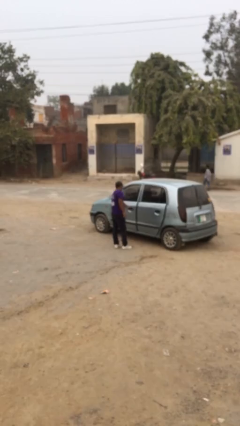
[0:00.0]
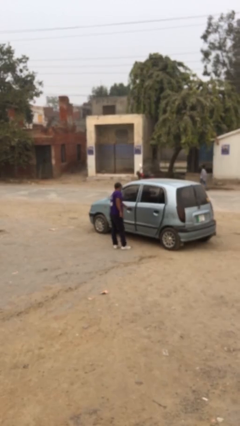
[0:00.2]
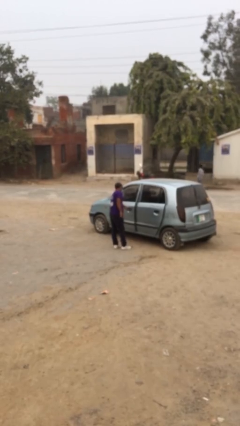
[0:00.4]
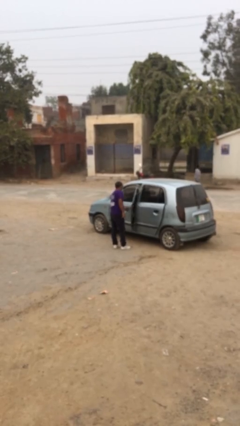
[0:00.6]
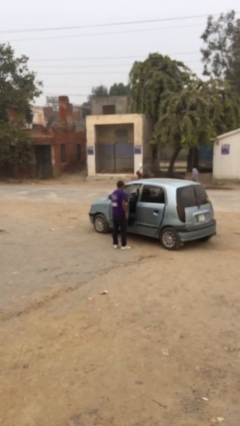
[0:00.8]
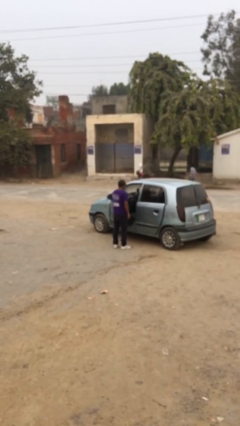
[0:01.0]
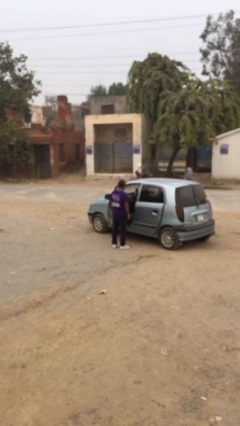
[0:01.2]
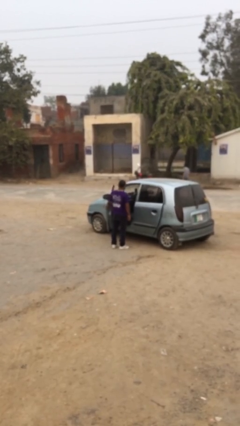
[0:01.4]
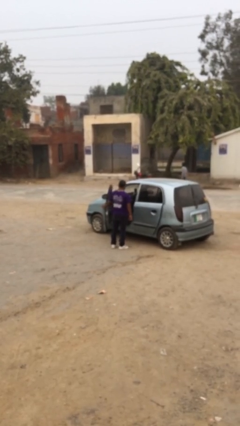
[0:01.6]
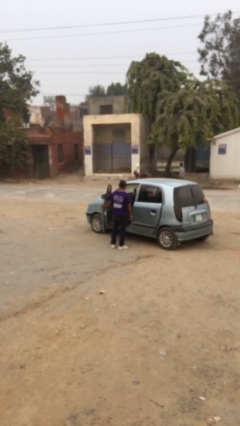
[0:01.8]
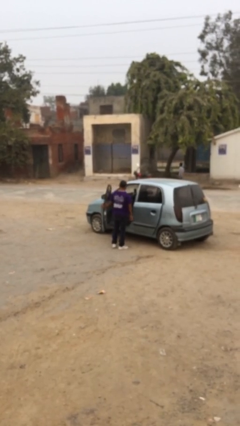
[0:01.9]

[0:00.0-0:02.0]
person opens car door

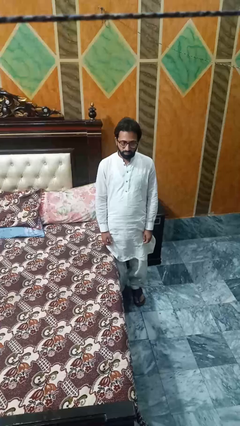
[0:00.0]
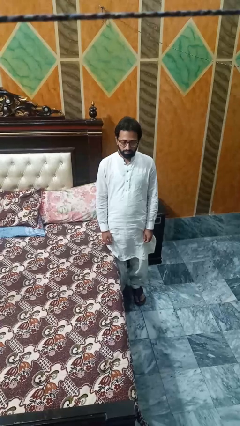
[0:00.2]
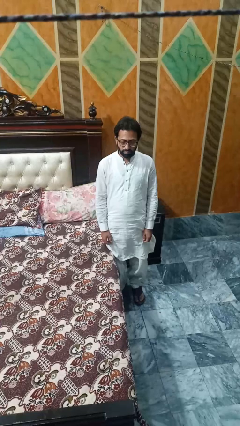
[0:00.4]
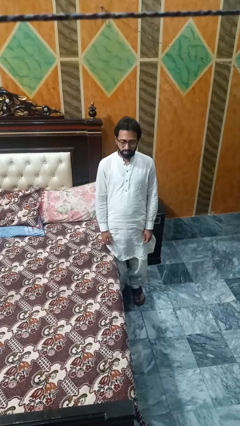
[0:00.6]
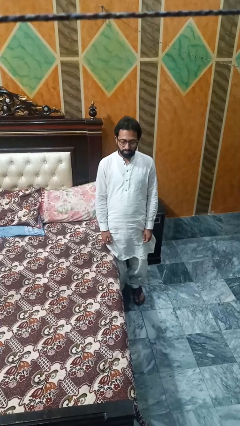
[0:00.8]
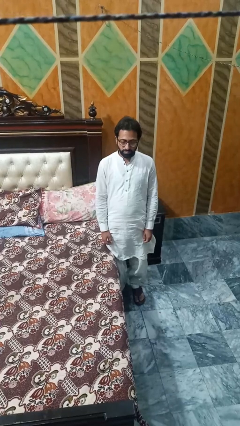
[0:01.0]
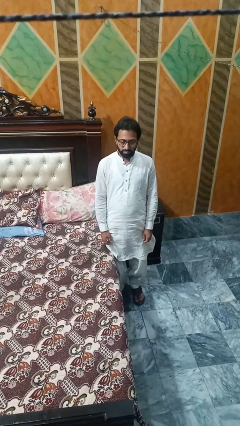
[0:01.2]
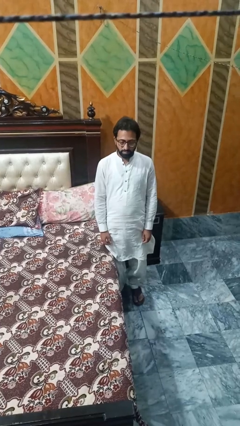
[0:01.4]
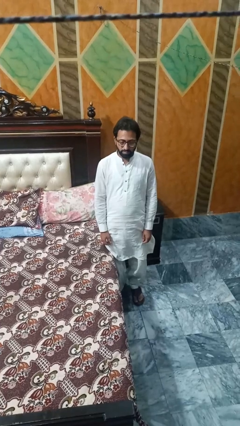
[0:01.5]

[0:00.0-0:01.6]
person lies down on bed

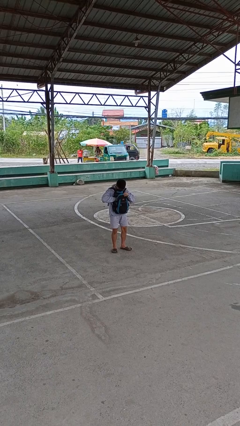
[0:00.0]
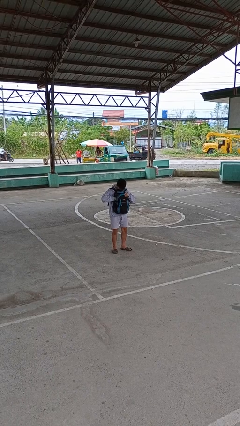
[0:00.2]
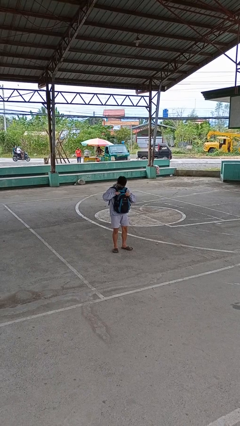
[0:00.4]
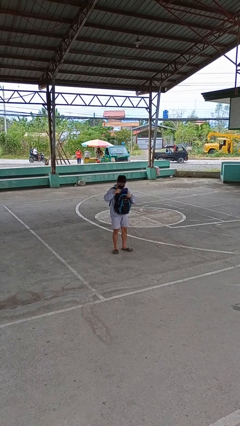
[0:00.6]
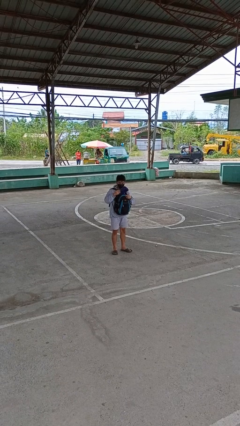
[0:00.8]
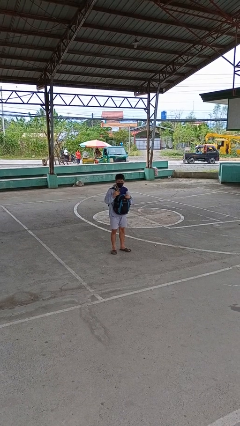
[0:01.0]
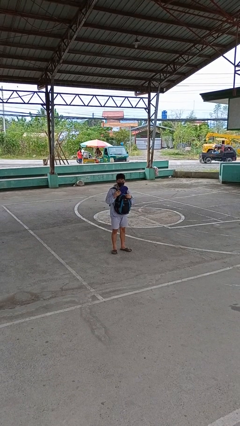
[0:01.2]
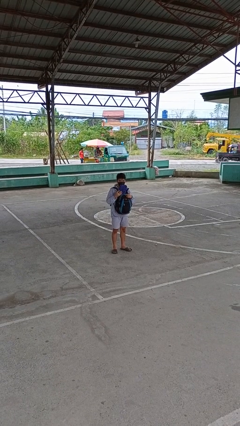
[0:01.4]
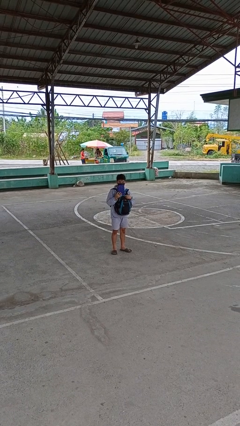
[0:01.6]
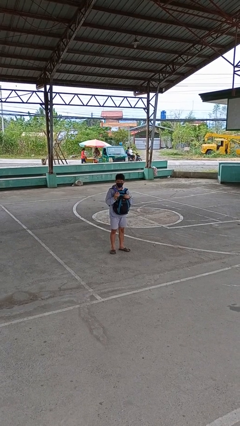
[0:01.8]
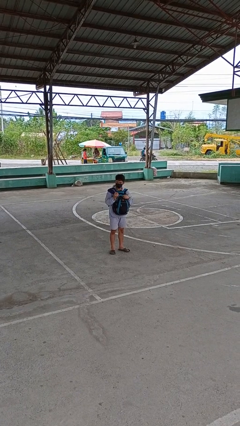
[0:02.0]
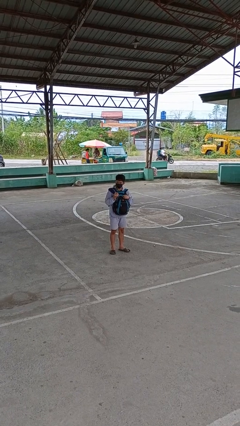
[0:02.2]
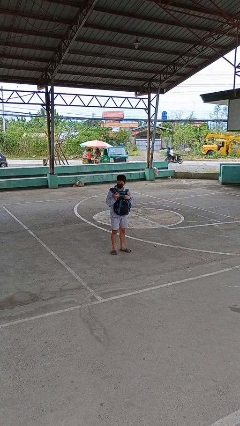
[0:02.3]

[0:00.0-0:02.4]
person takes object from backpack

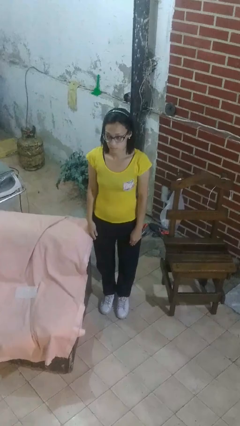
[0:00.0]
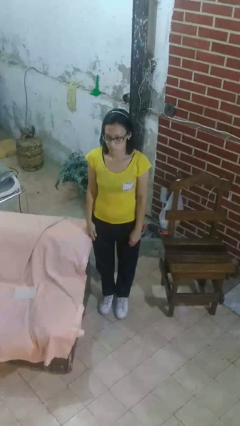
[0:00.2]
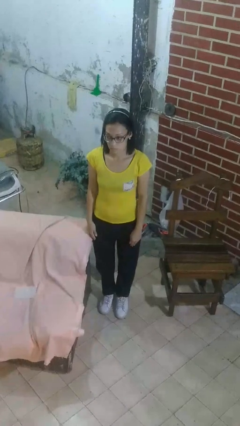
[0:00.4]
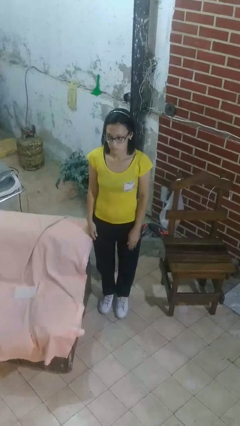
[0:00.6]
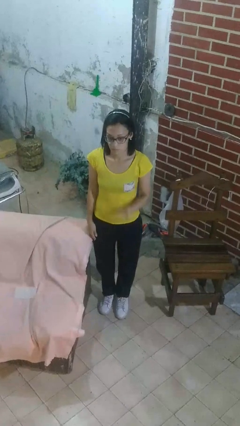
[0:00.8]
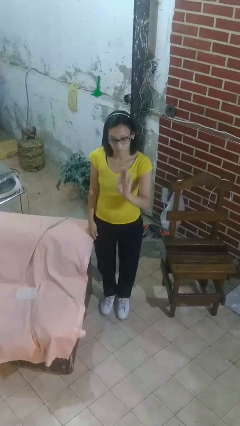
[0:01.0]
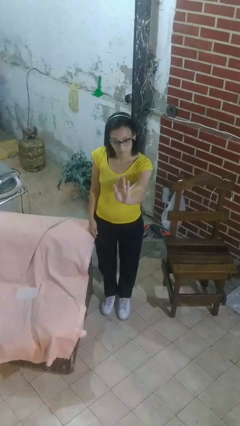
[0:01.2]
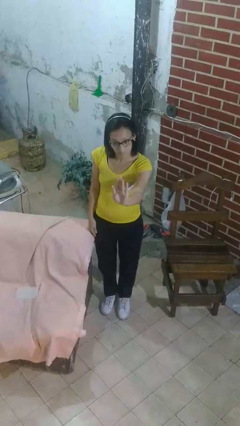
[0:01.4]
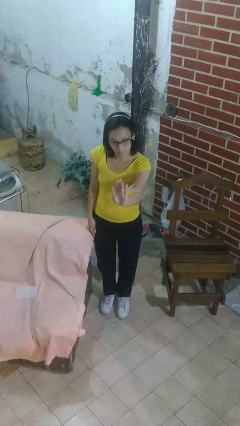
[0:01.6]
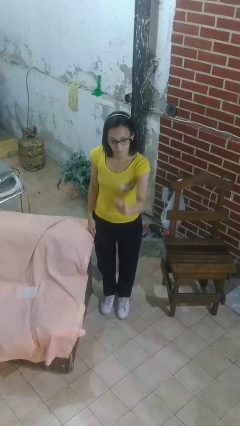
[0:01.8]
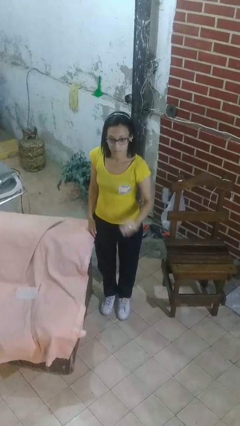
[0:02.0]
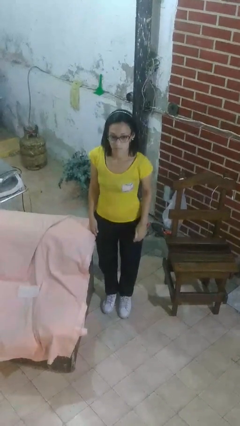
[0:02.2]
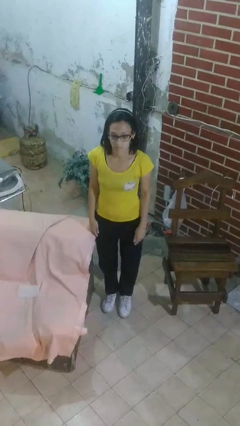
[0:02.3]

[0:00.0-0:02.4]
person gestures stop

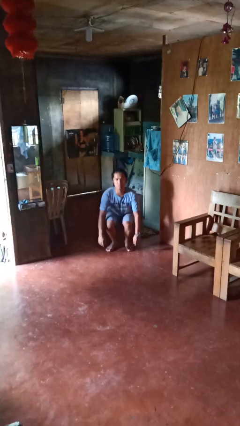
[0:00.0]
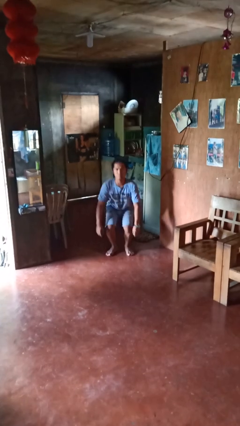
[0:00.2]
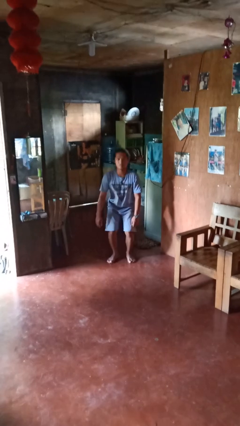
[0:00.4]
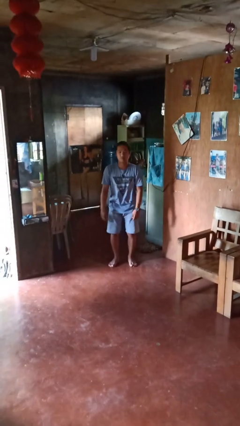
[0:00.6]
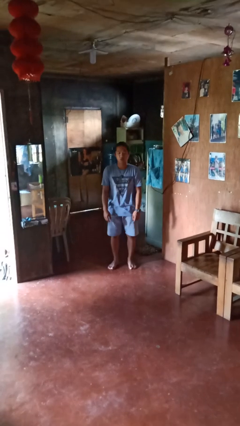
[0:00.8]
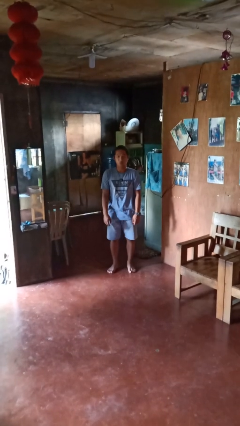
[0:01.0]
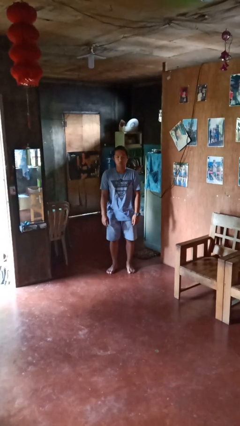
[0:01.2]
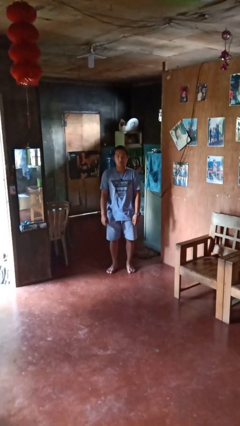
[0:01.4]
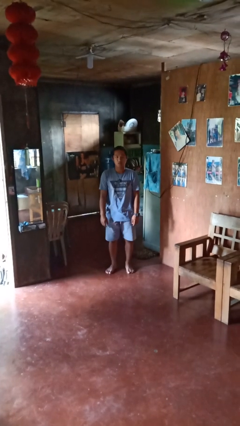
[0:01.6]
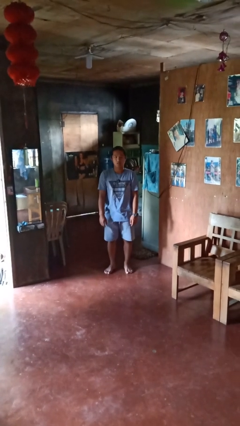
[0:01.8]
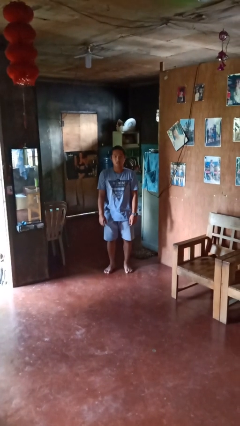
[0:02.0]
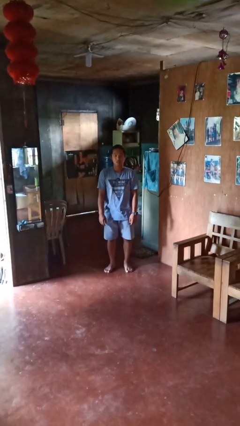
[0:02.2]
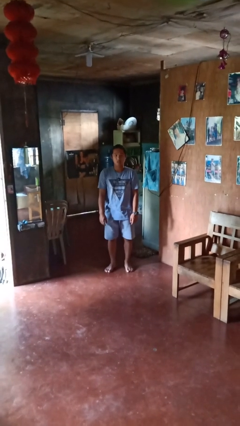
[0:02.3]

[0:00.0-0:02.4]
person stands up

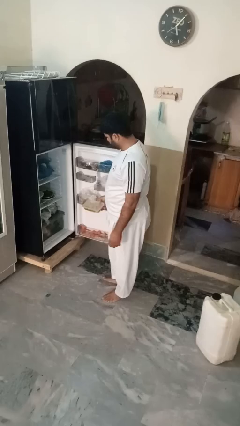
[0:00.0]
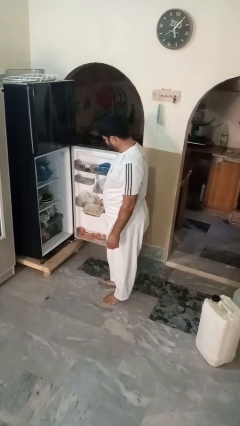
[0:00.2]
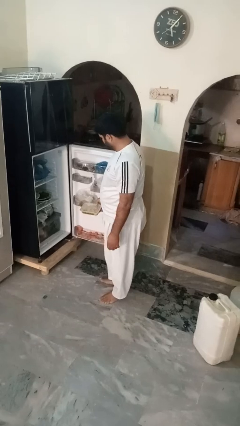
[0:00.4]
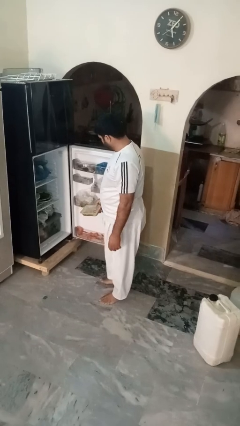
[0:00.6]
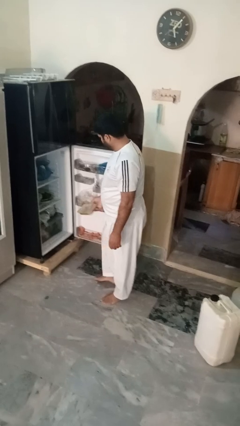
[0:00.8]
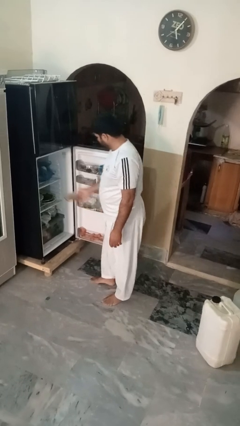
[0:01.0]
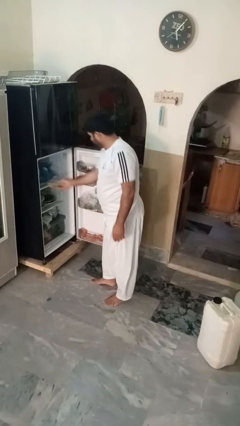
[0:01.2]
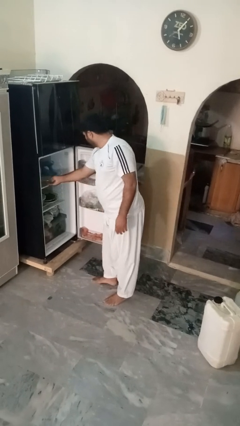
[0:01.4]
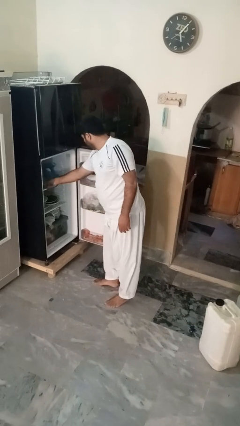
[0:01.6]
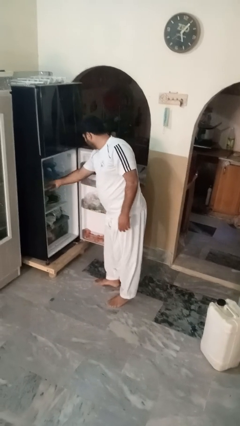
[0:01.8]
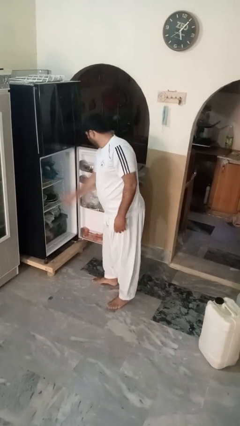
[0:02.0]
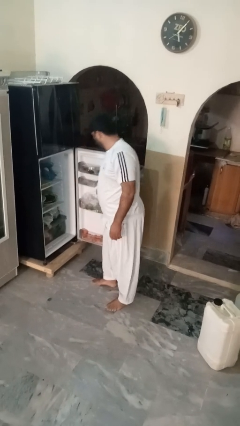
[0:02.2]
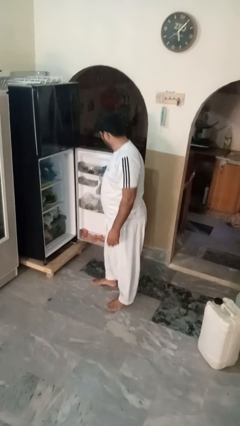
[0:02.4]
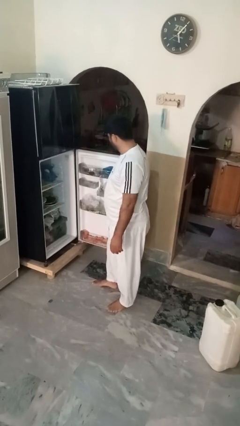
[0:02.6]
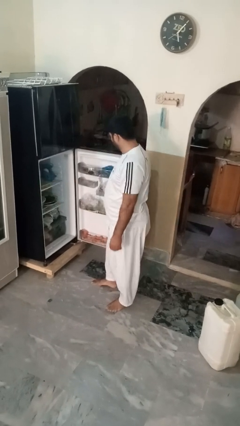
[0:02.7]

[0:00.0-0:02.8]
person puts object into refrigerator

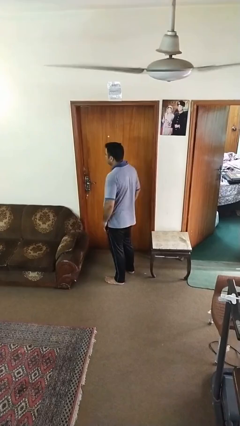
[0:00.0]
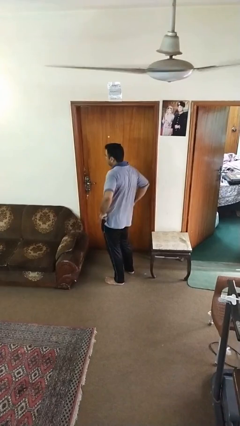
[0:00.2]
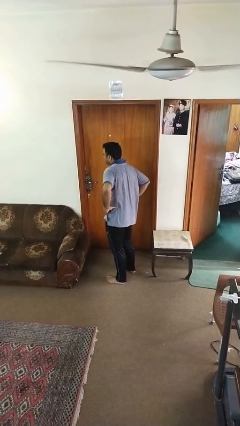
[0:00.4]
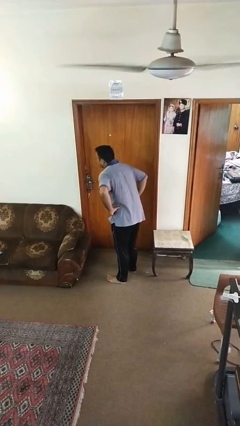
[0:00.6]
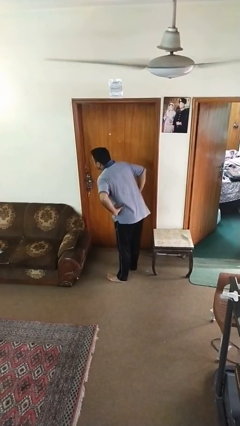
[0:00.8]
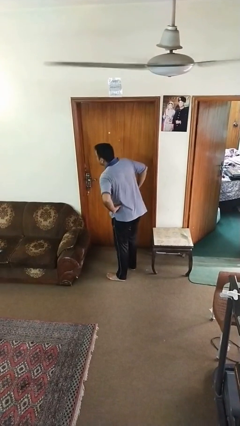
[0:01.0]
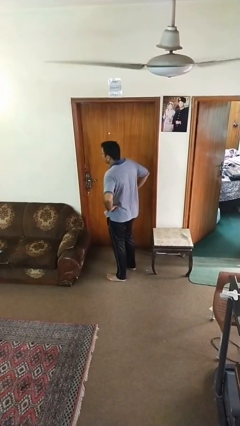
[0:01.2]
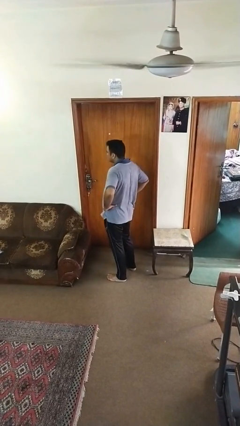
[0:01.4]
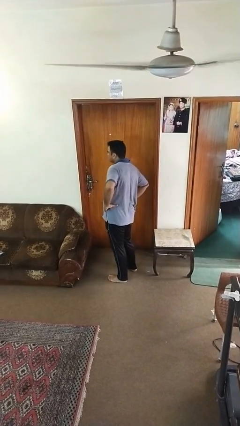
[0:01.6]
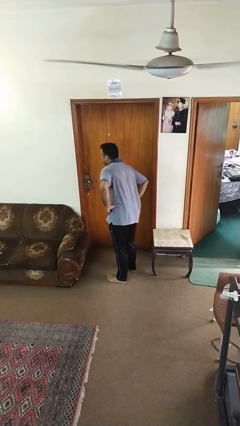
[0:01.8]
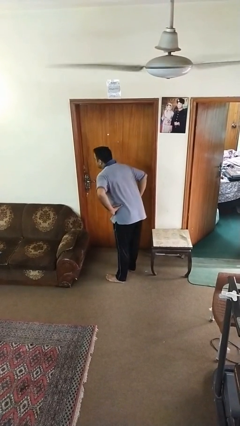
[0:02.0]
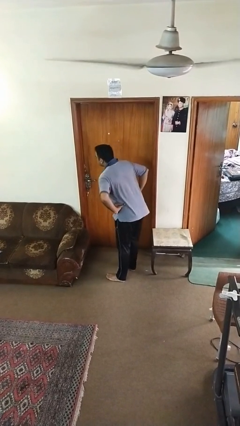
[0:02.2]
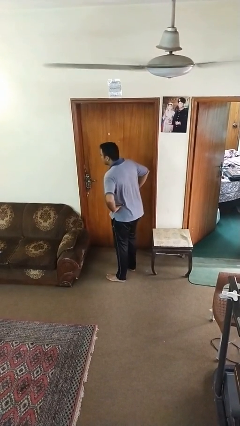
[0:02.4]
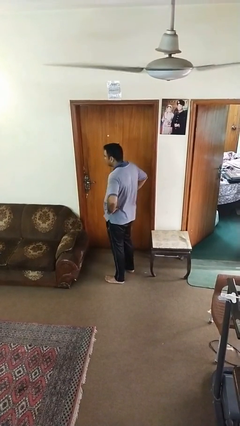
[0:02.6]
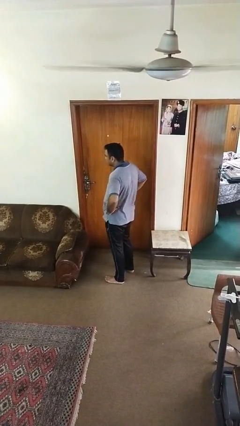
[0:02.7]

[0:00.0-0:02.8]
person wiggles hips

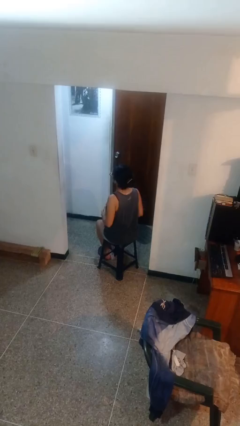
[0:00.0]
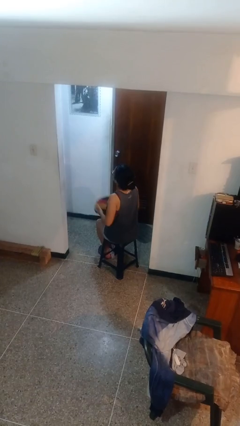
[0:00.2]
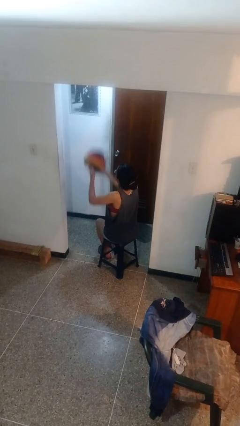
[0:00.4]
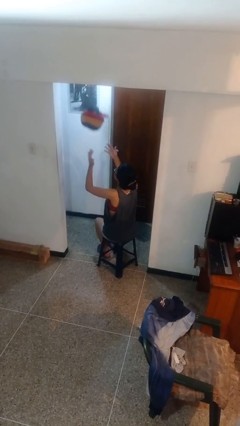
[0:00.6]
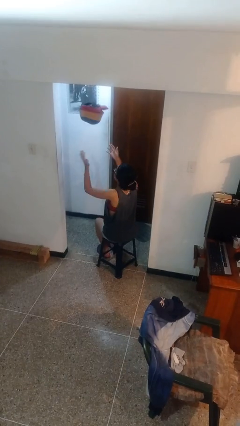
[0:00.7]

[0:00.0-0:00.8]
person drops object
